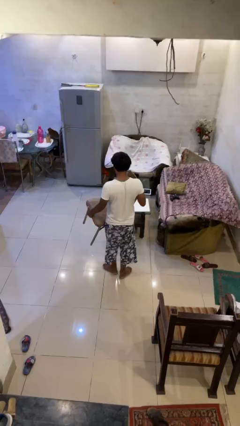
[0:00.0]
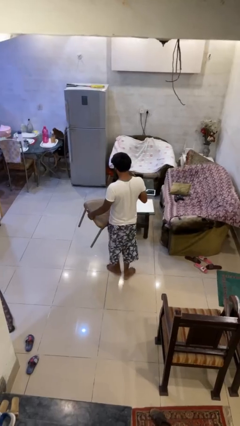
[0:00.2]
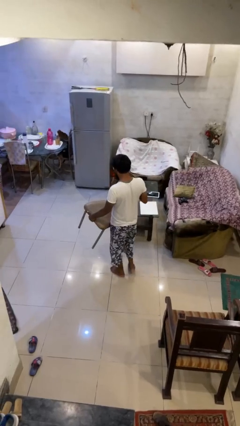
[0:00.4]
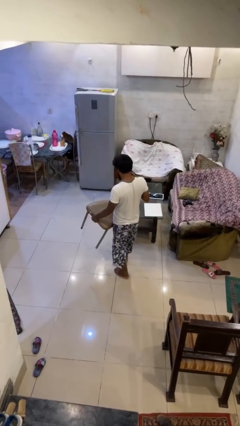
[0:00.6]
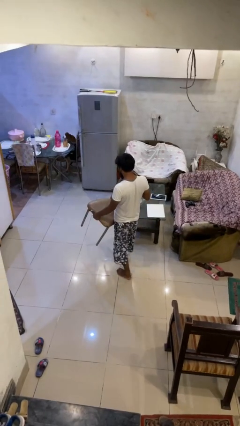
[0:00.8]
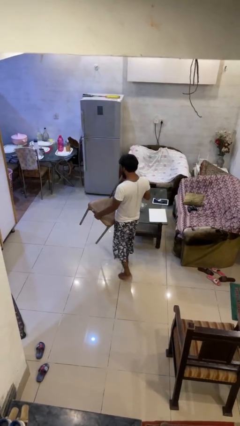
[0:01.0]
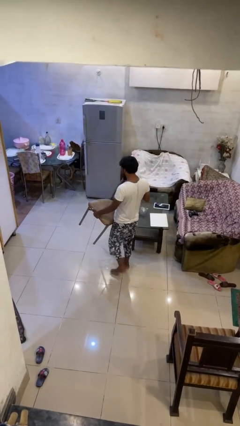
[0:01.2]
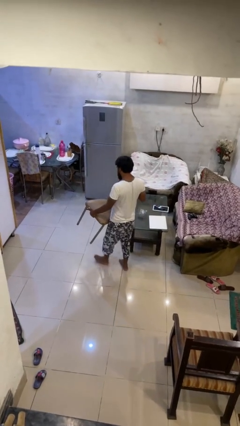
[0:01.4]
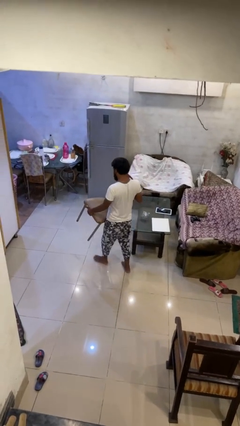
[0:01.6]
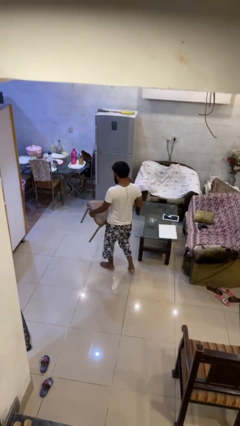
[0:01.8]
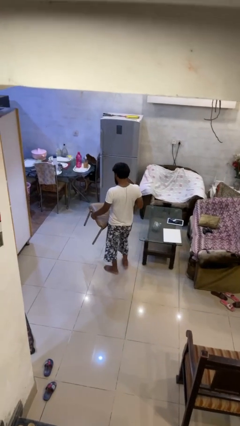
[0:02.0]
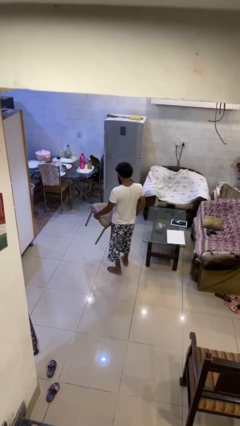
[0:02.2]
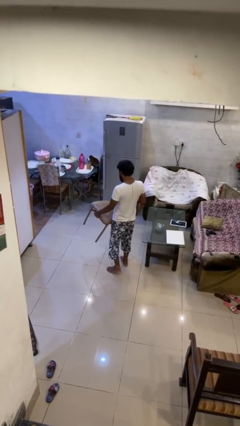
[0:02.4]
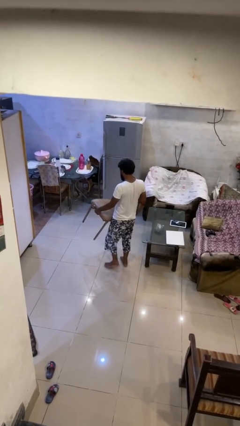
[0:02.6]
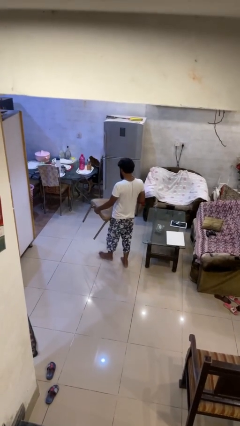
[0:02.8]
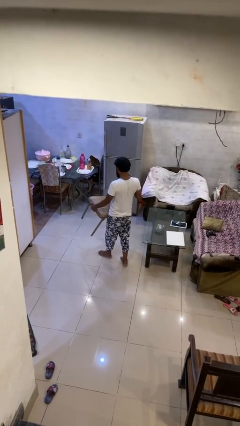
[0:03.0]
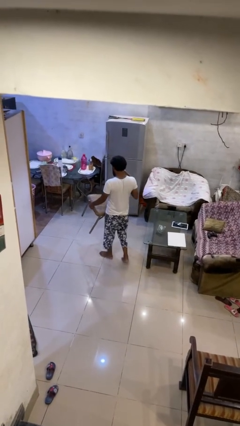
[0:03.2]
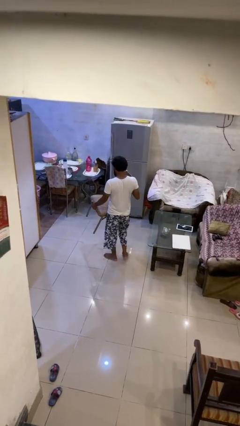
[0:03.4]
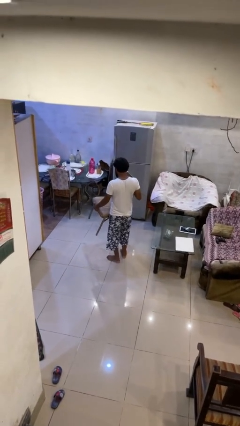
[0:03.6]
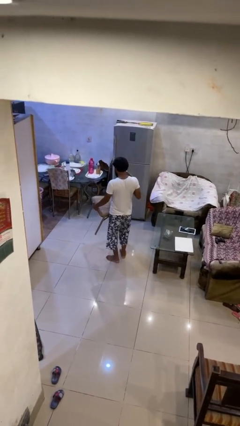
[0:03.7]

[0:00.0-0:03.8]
person carries furniture

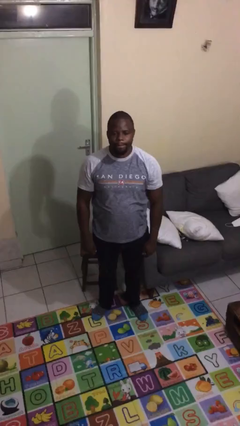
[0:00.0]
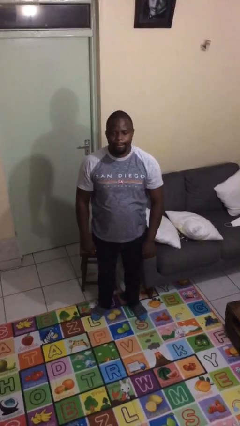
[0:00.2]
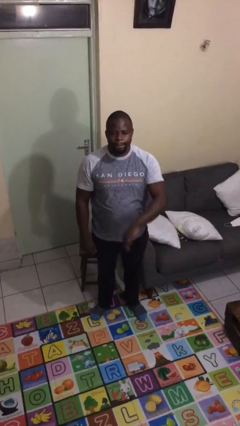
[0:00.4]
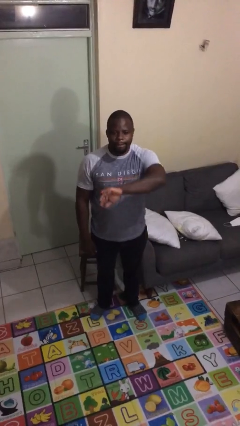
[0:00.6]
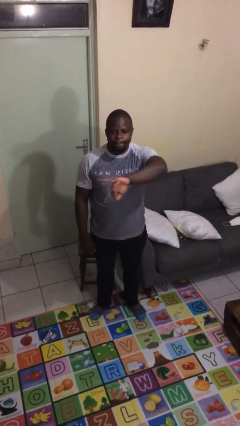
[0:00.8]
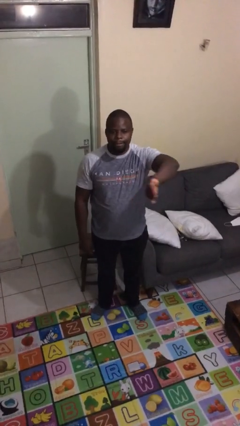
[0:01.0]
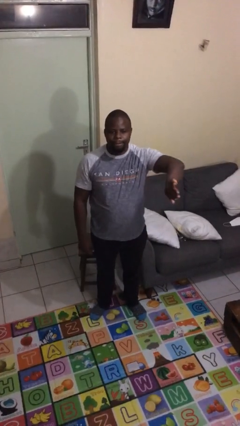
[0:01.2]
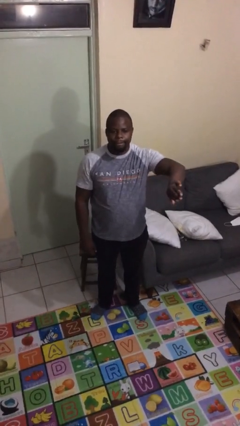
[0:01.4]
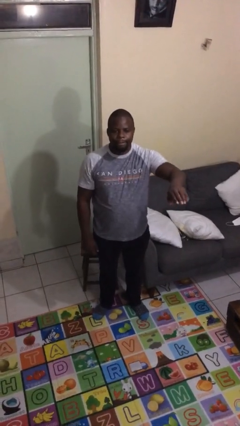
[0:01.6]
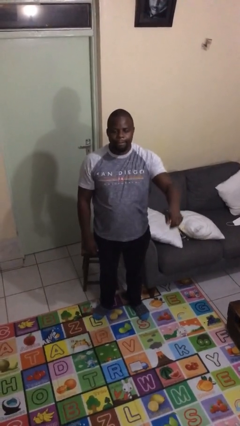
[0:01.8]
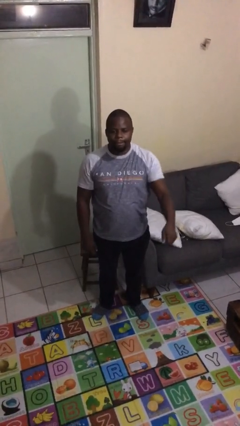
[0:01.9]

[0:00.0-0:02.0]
person gestures swipe left

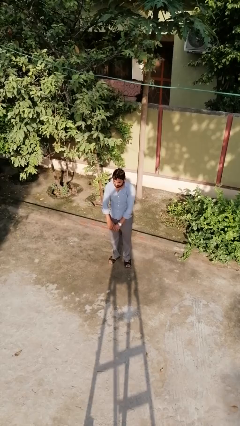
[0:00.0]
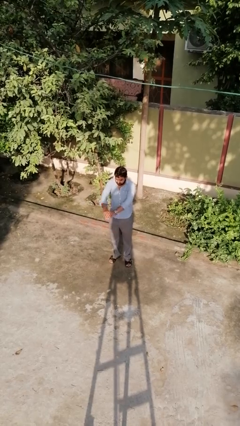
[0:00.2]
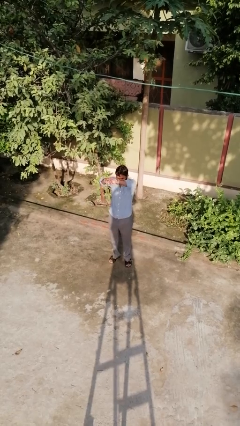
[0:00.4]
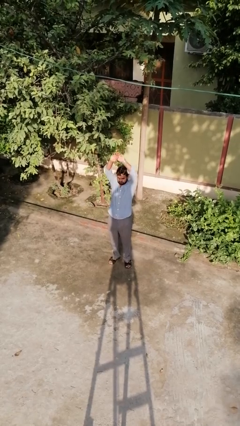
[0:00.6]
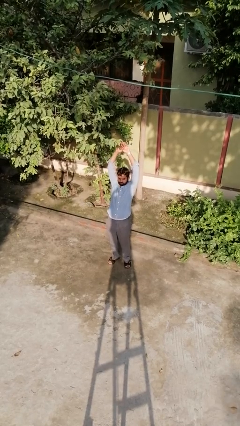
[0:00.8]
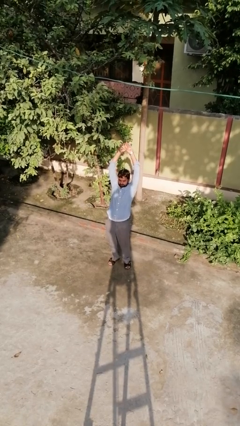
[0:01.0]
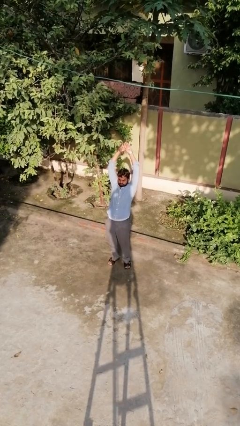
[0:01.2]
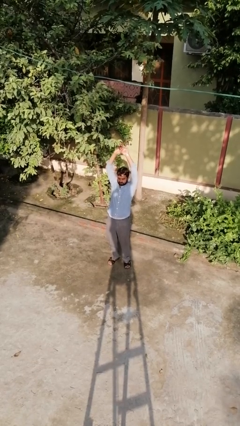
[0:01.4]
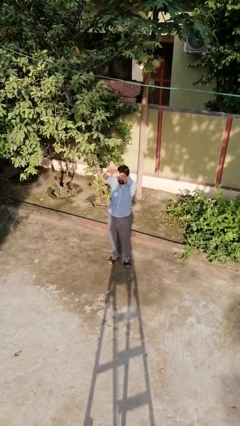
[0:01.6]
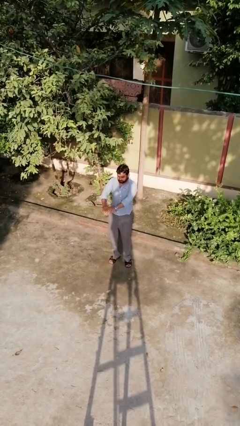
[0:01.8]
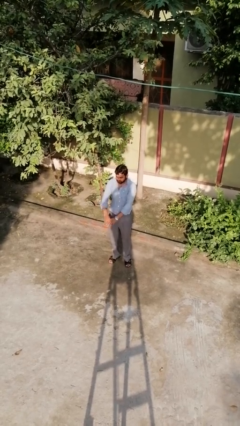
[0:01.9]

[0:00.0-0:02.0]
person stretches arms over head

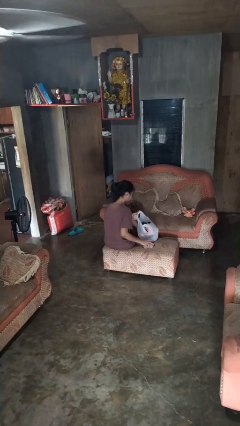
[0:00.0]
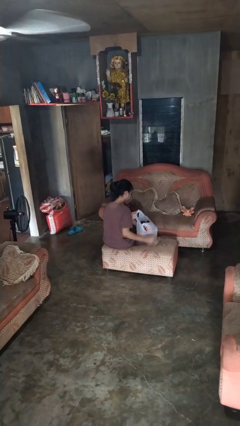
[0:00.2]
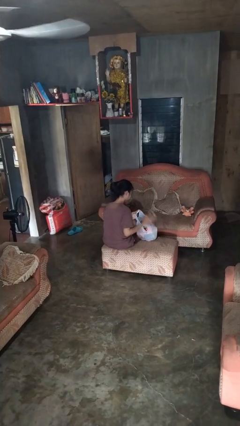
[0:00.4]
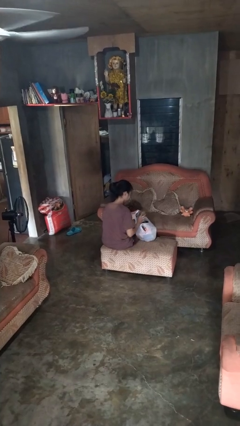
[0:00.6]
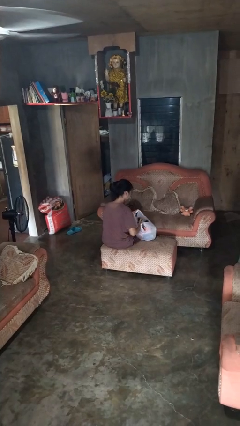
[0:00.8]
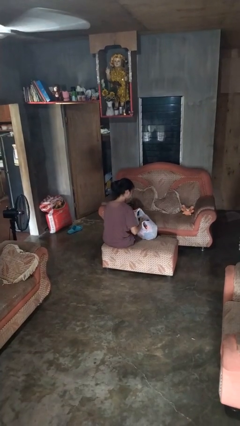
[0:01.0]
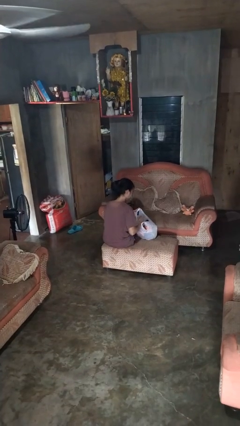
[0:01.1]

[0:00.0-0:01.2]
person puts object into bag

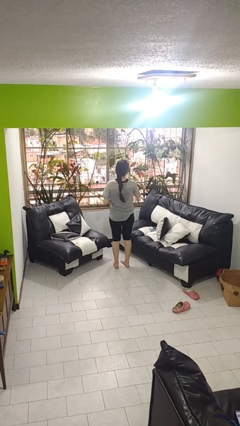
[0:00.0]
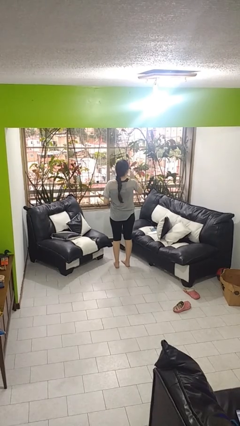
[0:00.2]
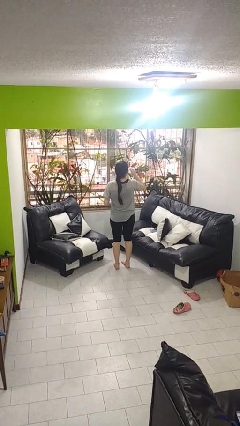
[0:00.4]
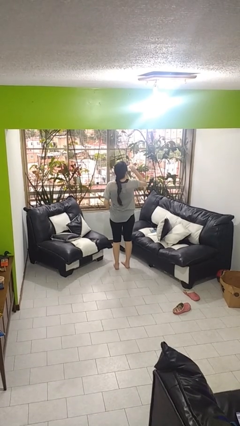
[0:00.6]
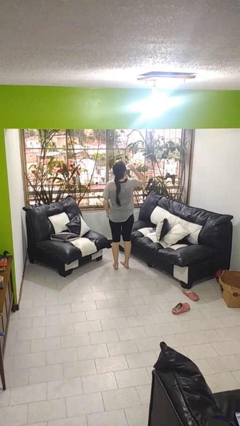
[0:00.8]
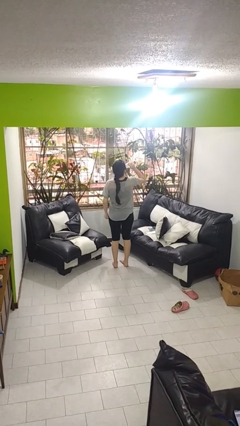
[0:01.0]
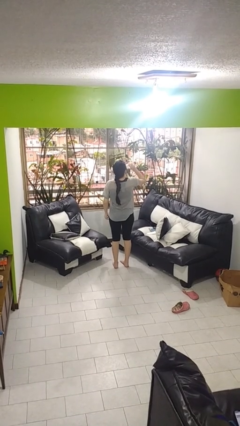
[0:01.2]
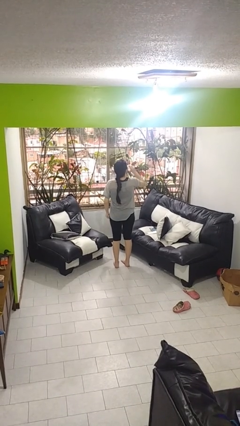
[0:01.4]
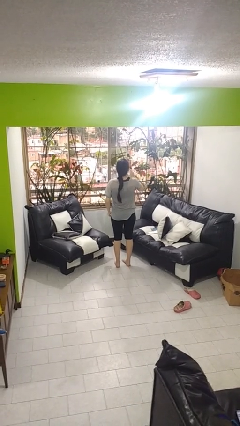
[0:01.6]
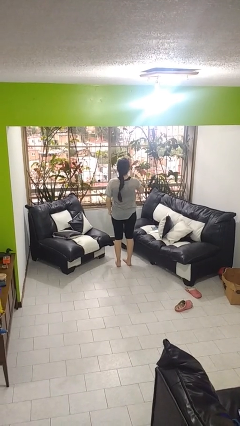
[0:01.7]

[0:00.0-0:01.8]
person drinks from bottle

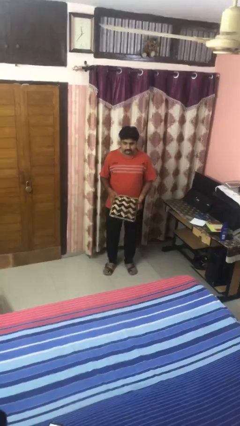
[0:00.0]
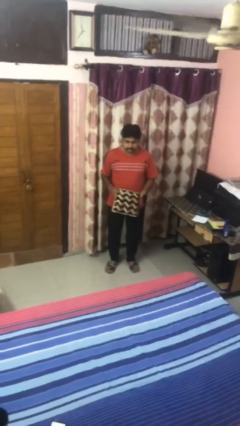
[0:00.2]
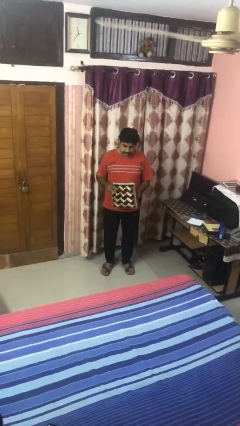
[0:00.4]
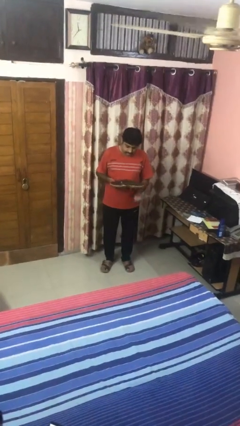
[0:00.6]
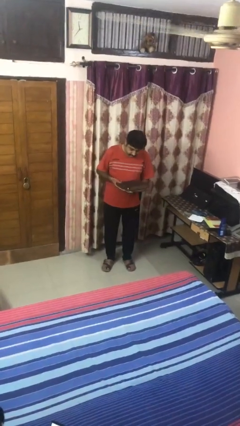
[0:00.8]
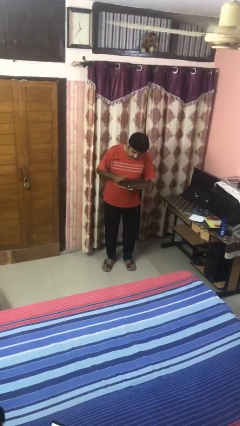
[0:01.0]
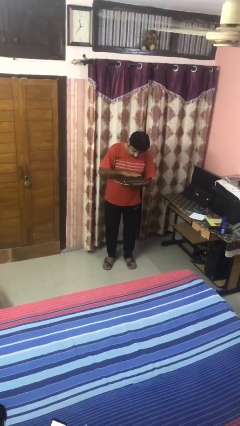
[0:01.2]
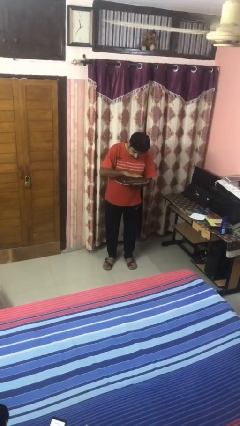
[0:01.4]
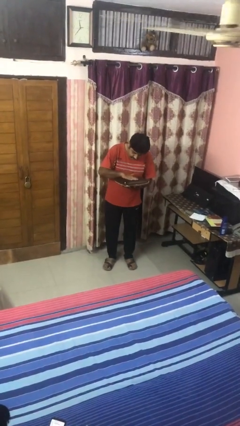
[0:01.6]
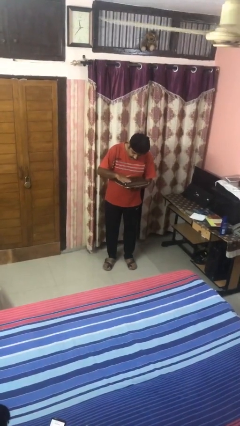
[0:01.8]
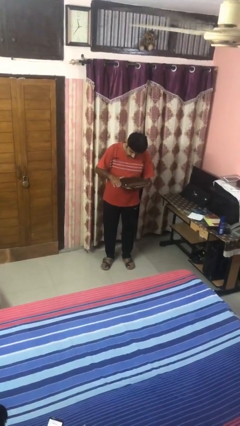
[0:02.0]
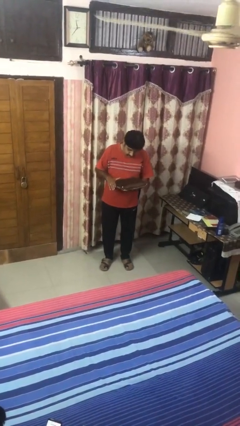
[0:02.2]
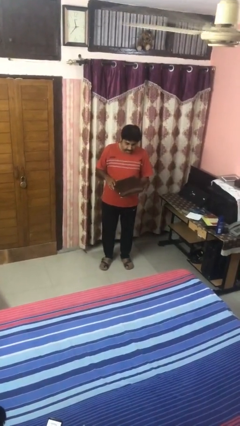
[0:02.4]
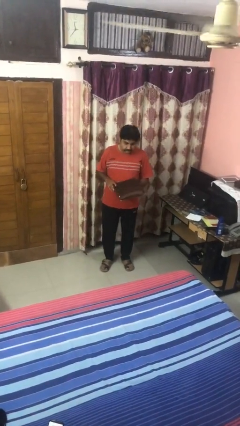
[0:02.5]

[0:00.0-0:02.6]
person waves hand over object

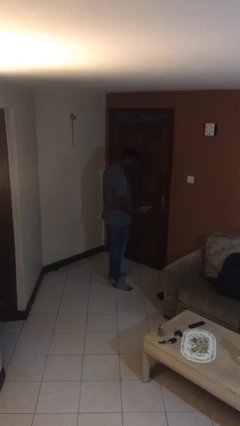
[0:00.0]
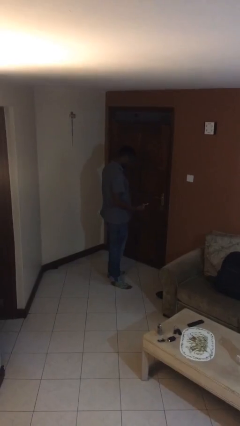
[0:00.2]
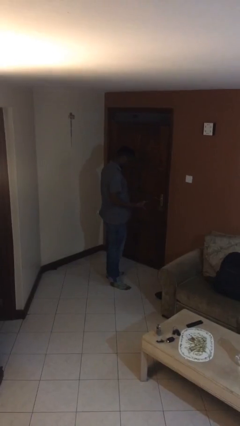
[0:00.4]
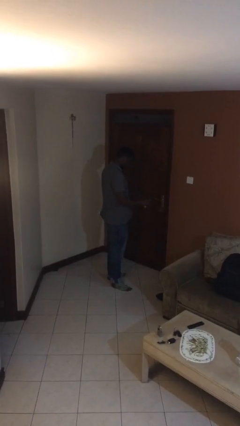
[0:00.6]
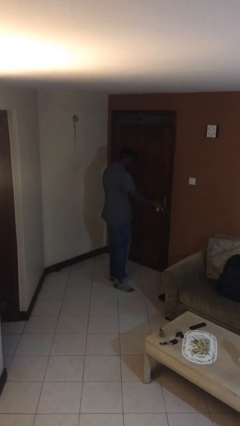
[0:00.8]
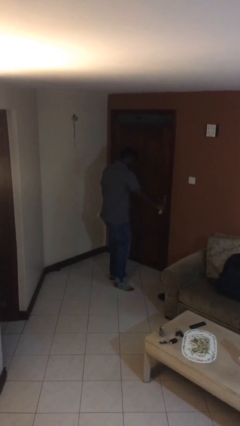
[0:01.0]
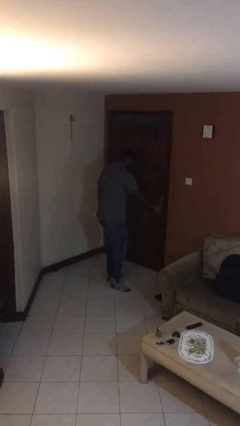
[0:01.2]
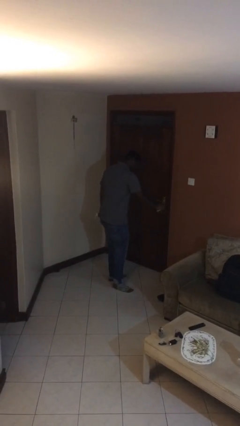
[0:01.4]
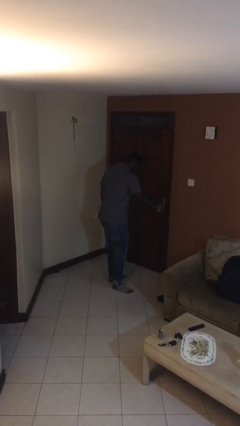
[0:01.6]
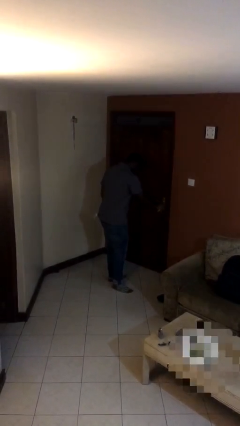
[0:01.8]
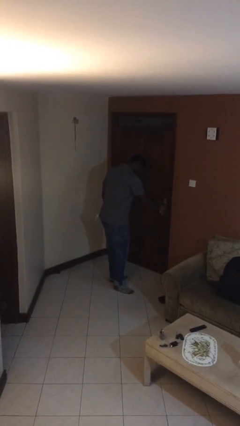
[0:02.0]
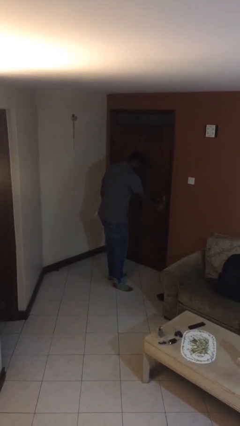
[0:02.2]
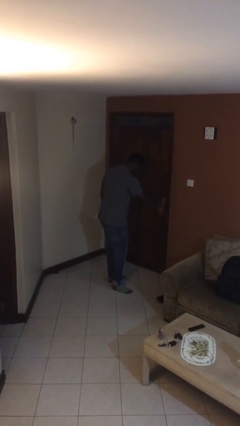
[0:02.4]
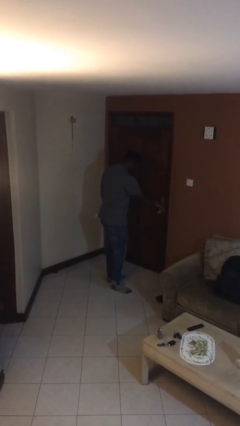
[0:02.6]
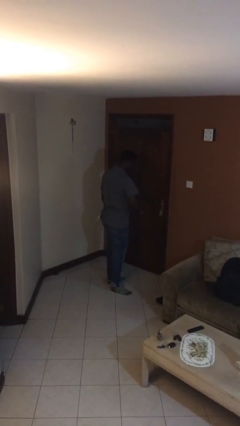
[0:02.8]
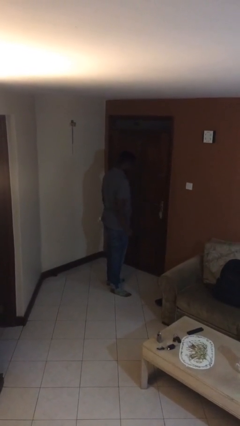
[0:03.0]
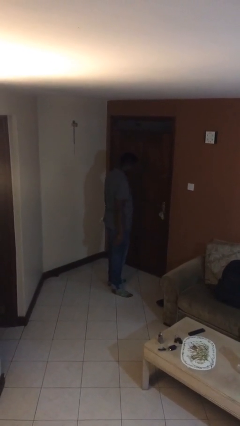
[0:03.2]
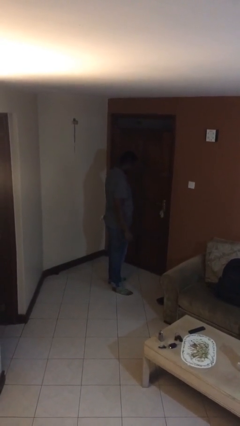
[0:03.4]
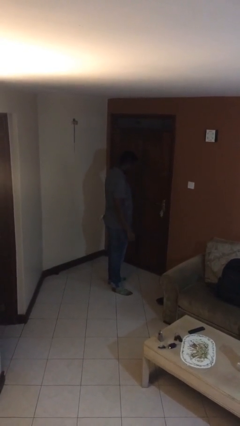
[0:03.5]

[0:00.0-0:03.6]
person unlocks door with keys

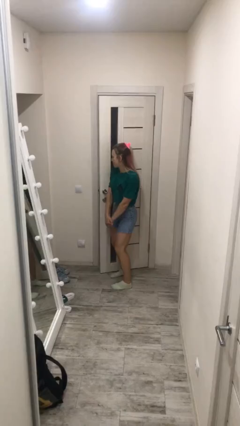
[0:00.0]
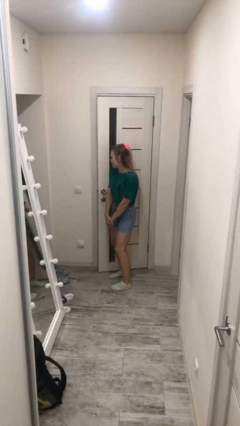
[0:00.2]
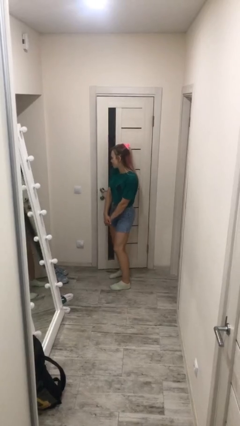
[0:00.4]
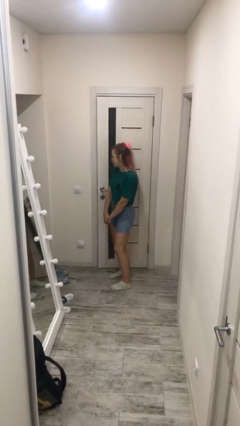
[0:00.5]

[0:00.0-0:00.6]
person closes door with hip
